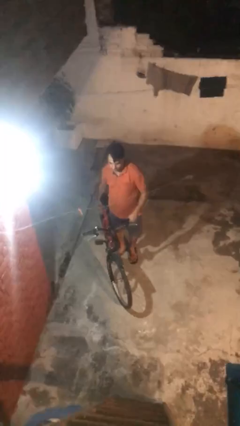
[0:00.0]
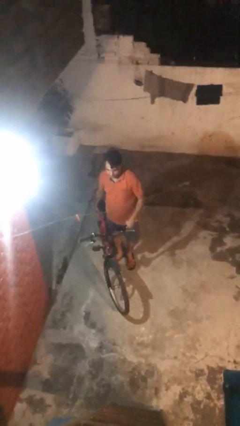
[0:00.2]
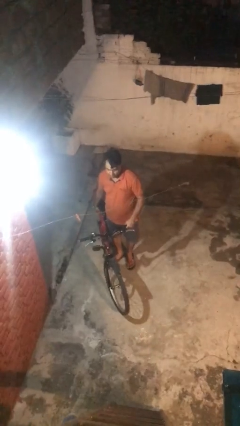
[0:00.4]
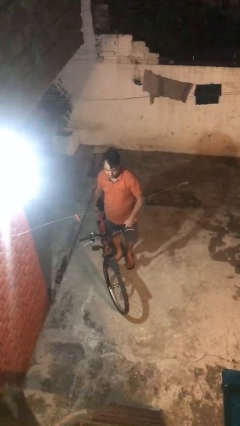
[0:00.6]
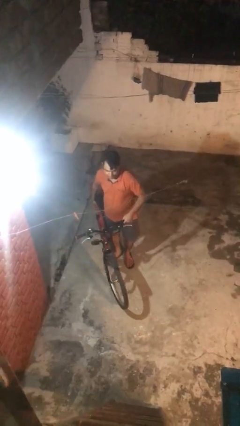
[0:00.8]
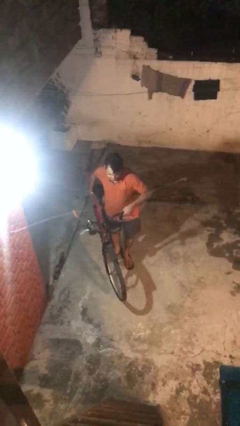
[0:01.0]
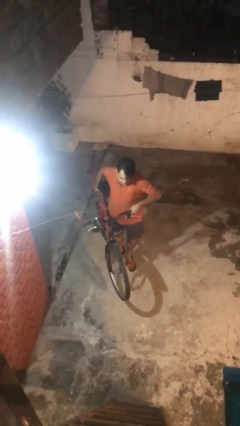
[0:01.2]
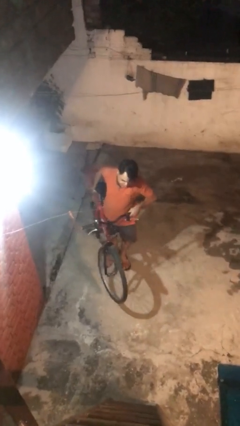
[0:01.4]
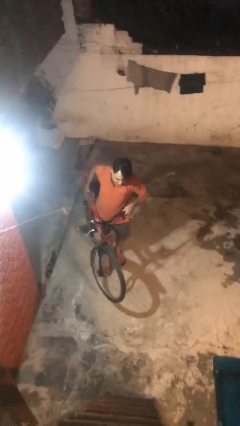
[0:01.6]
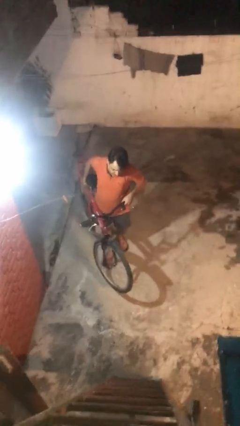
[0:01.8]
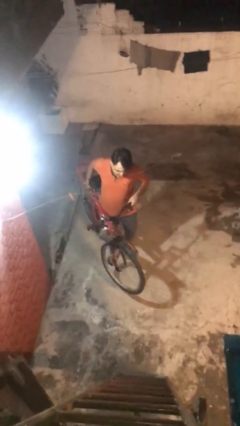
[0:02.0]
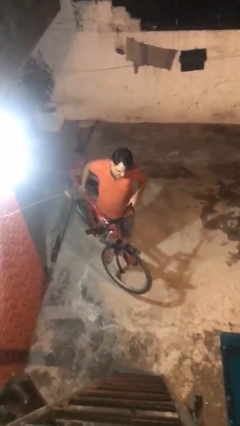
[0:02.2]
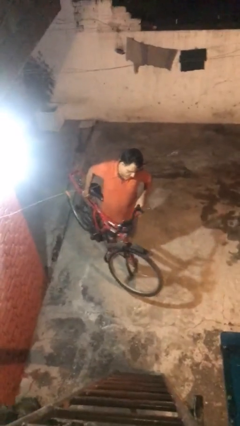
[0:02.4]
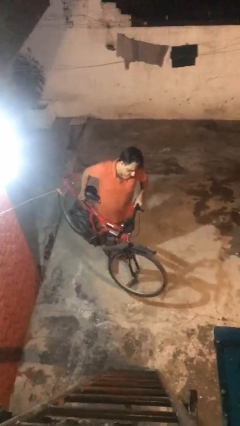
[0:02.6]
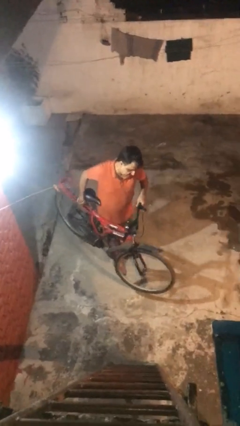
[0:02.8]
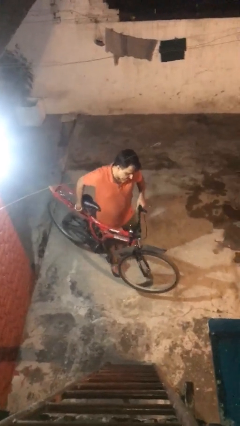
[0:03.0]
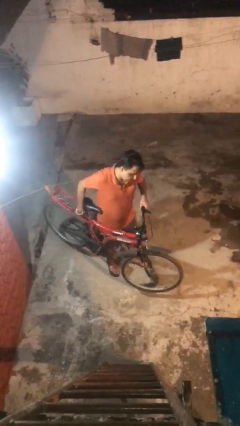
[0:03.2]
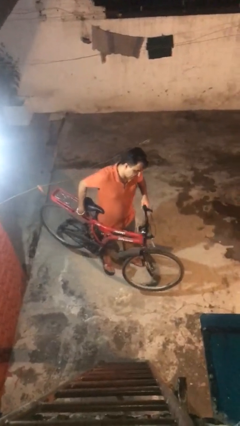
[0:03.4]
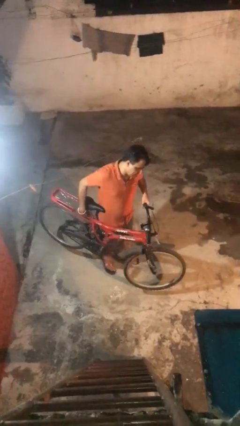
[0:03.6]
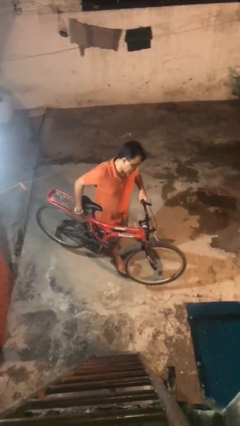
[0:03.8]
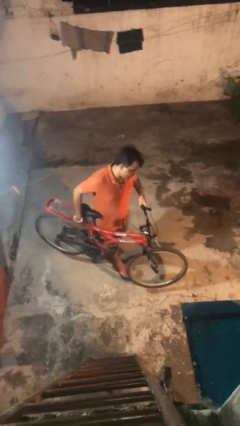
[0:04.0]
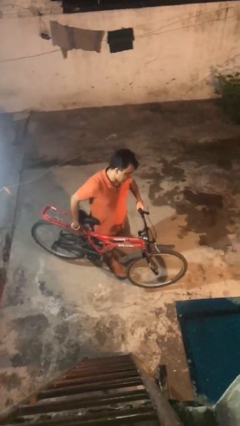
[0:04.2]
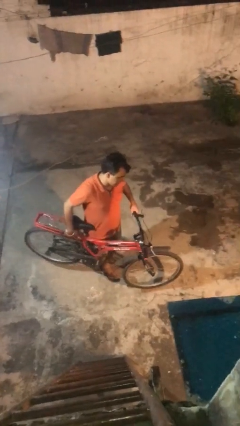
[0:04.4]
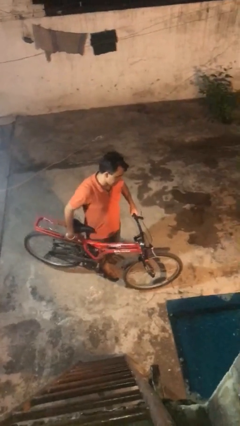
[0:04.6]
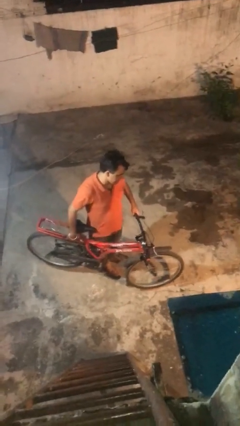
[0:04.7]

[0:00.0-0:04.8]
person carries bicycle

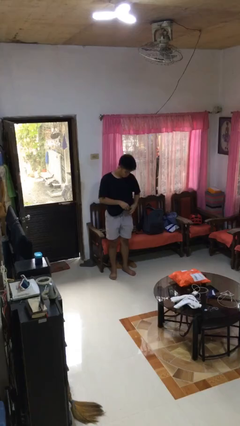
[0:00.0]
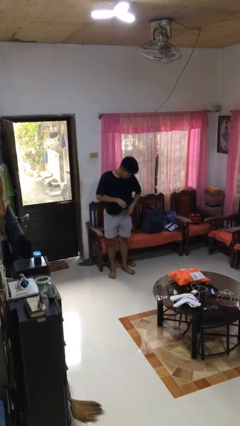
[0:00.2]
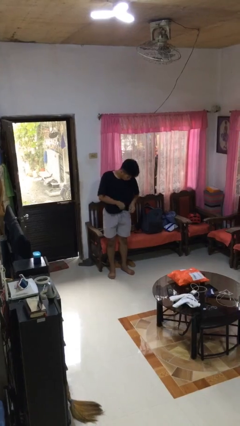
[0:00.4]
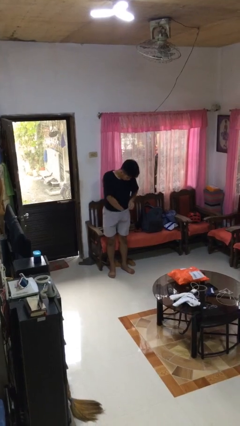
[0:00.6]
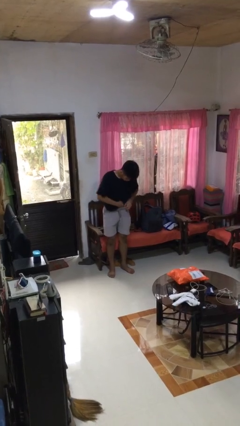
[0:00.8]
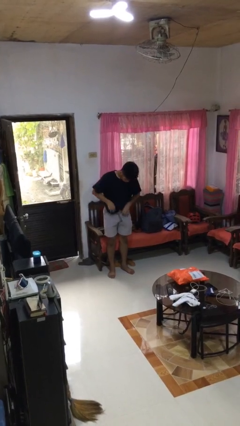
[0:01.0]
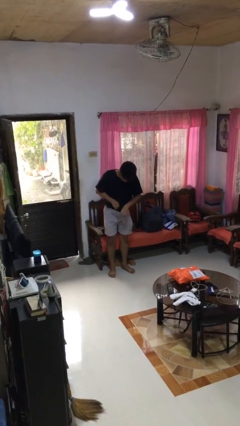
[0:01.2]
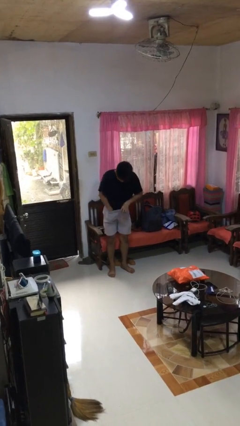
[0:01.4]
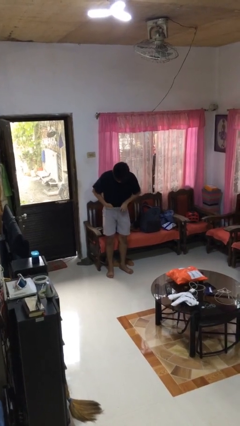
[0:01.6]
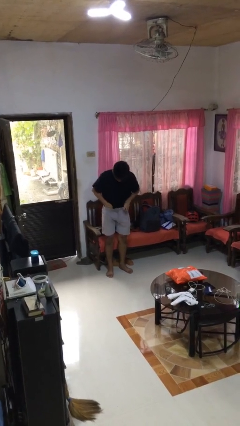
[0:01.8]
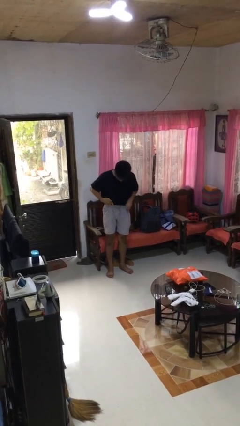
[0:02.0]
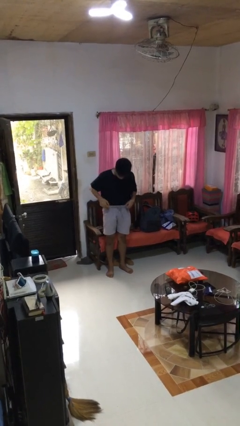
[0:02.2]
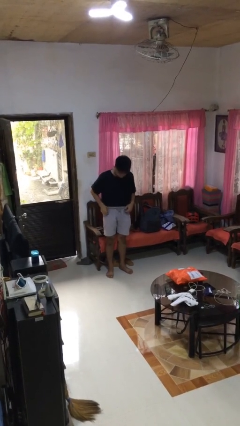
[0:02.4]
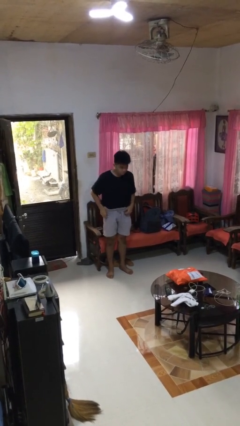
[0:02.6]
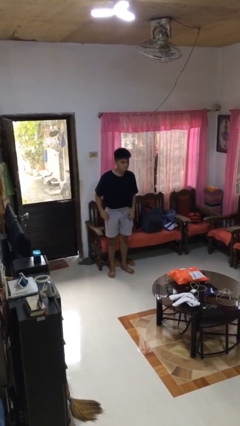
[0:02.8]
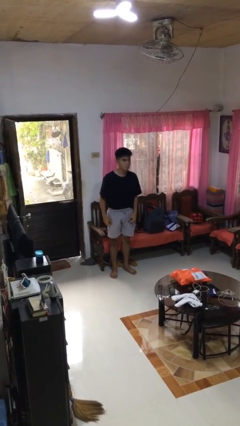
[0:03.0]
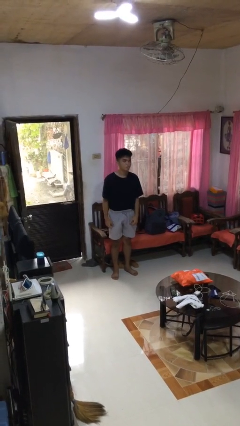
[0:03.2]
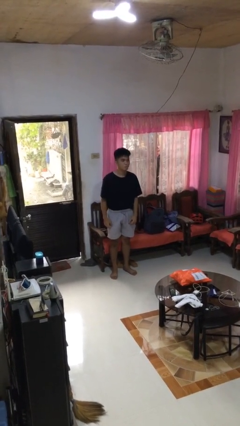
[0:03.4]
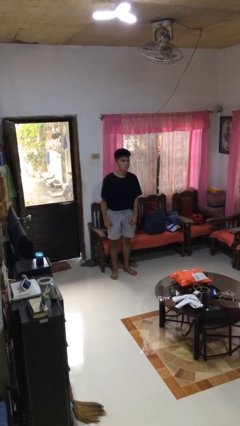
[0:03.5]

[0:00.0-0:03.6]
person tucks in shirt

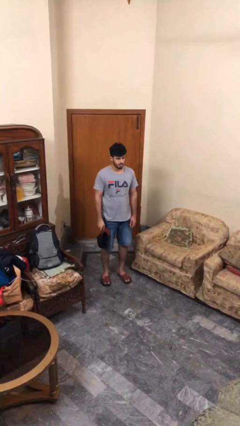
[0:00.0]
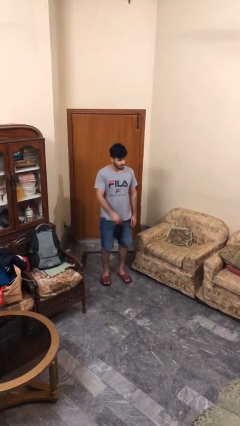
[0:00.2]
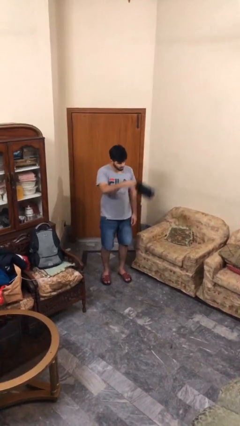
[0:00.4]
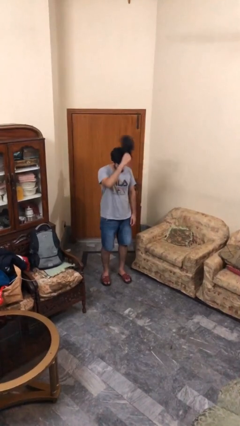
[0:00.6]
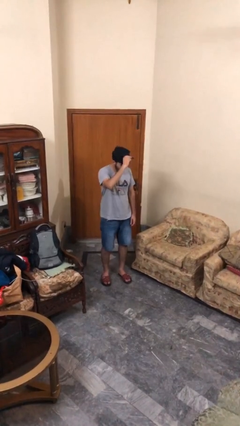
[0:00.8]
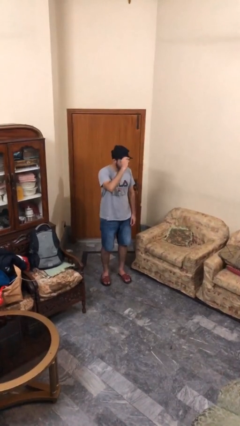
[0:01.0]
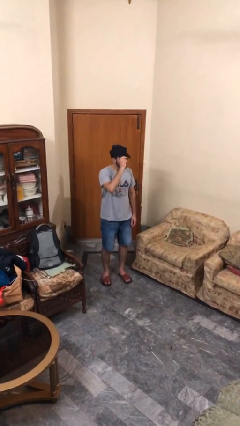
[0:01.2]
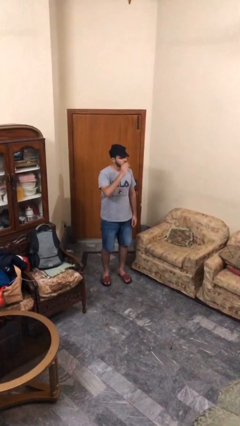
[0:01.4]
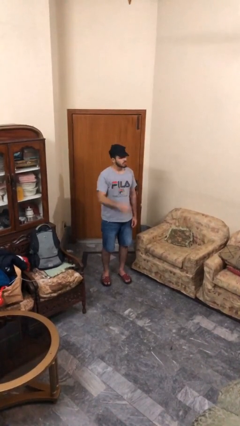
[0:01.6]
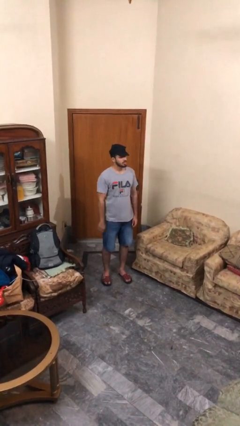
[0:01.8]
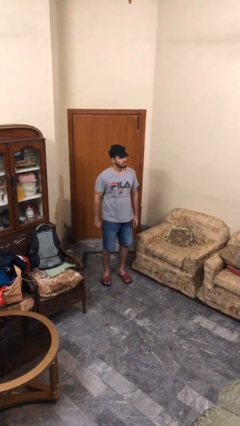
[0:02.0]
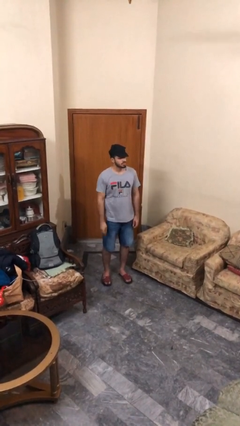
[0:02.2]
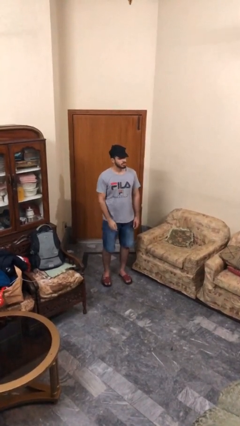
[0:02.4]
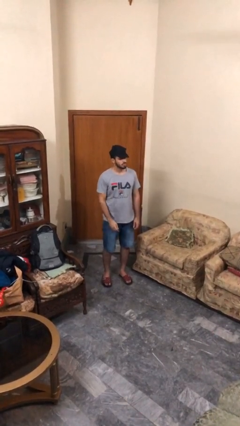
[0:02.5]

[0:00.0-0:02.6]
person puts on hat

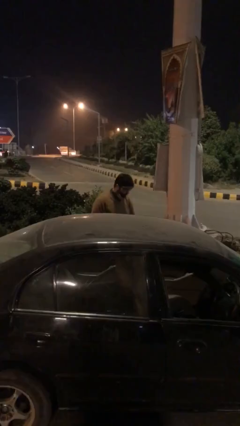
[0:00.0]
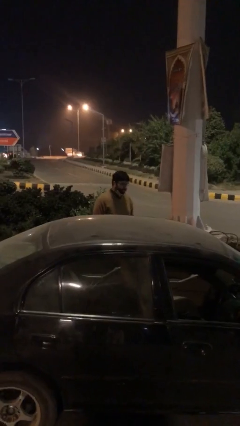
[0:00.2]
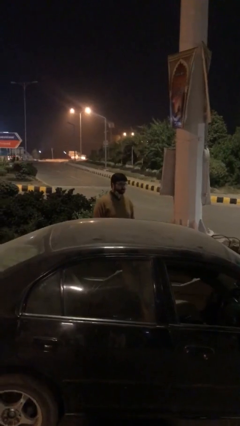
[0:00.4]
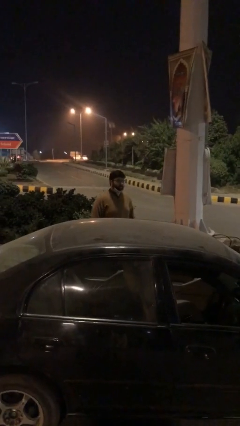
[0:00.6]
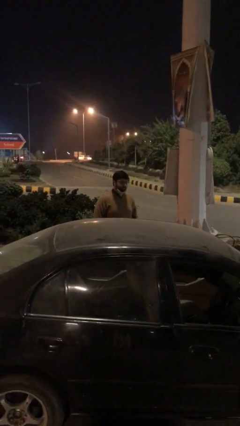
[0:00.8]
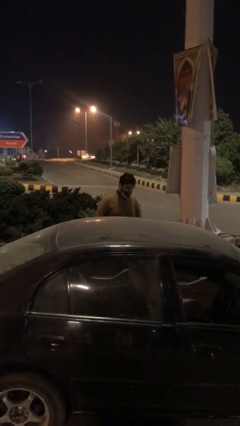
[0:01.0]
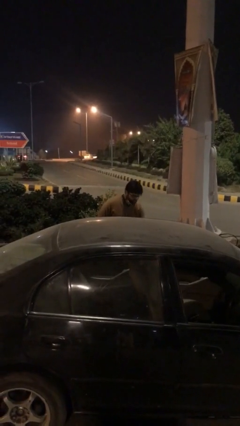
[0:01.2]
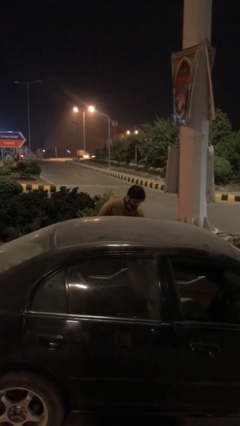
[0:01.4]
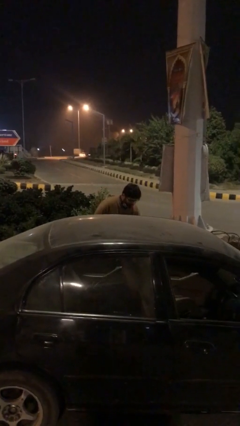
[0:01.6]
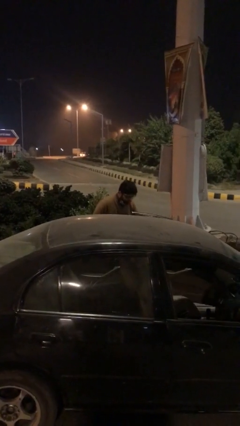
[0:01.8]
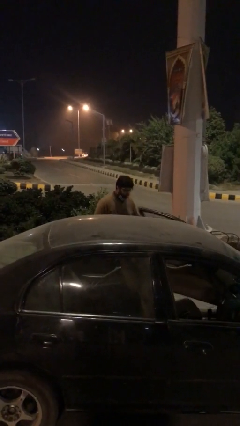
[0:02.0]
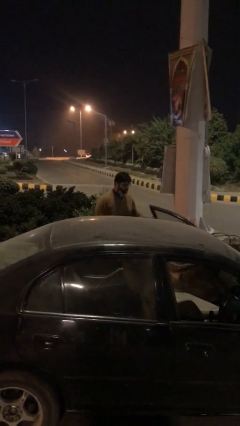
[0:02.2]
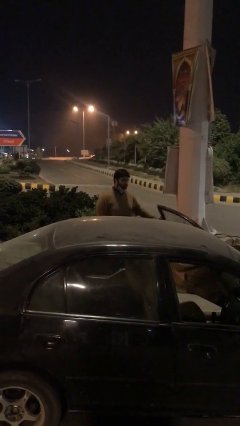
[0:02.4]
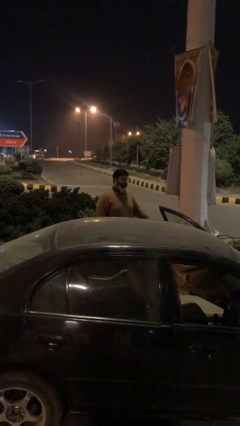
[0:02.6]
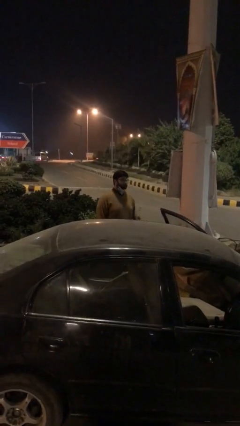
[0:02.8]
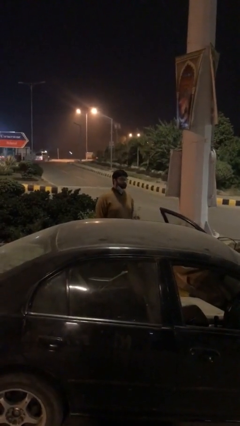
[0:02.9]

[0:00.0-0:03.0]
person opens car door

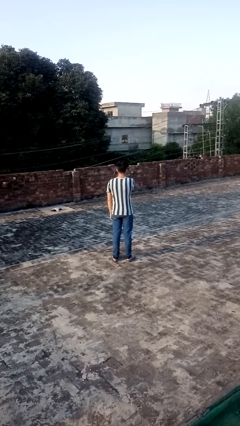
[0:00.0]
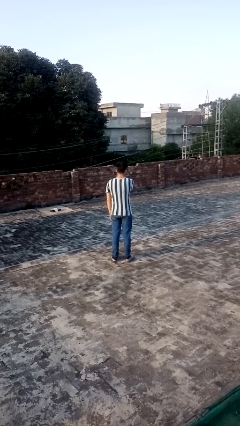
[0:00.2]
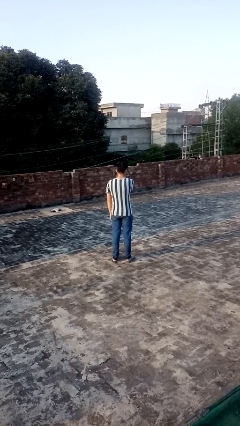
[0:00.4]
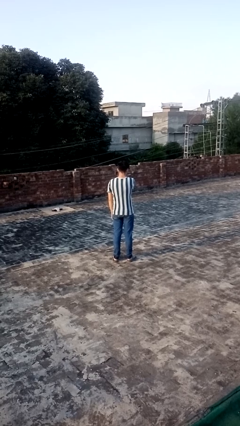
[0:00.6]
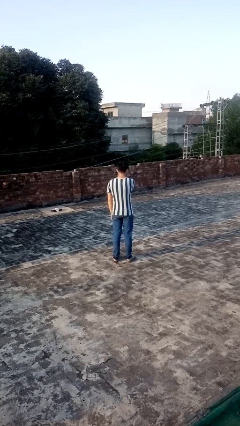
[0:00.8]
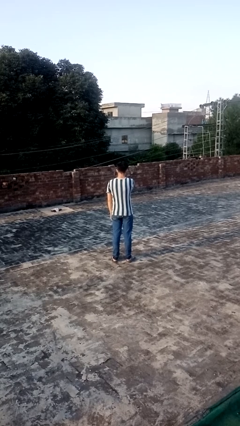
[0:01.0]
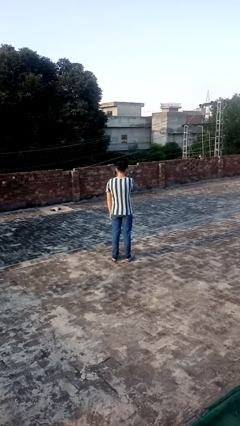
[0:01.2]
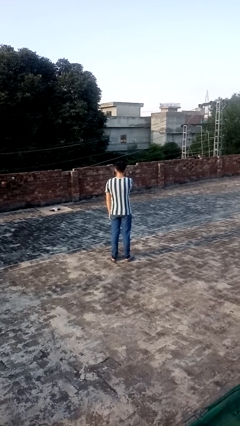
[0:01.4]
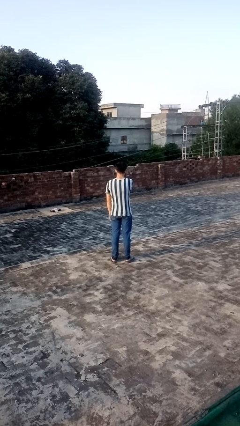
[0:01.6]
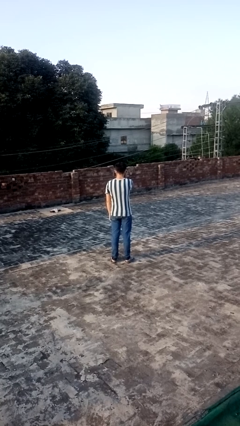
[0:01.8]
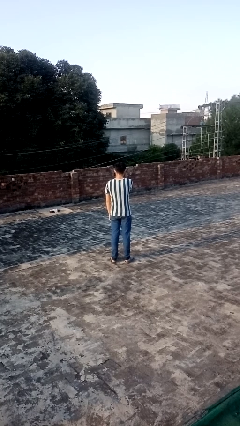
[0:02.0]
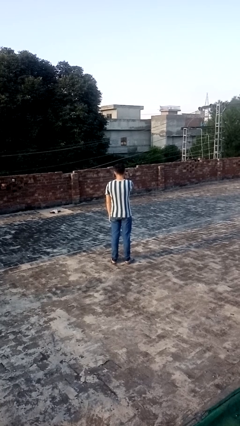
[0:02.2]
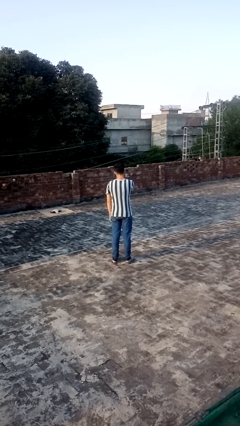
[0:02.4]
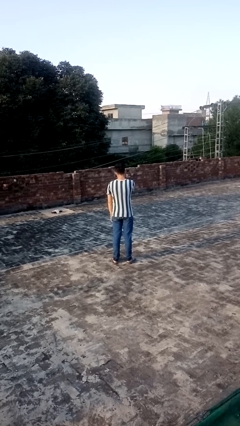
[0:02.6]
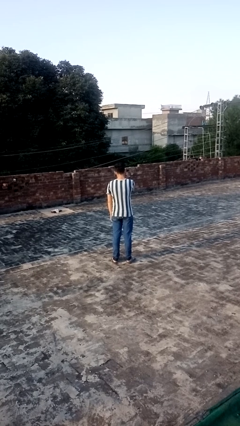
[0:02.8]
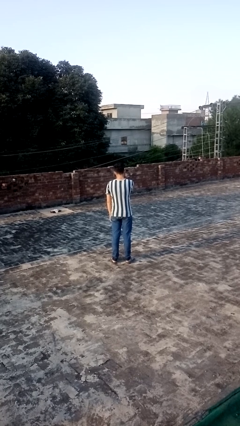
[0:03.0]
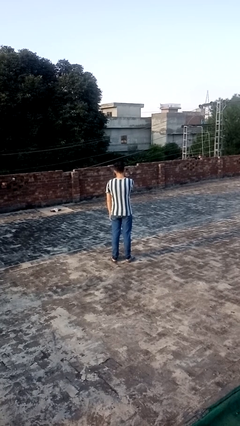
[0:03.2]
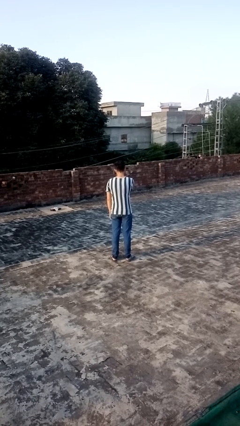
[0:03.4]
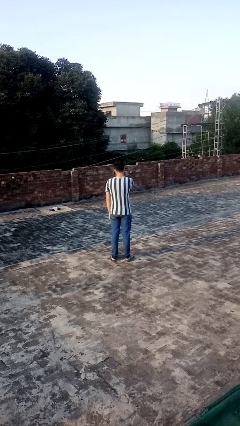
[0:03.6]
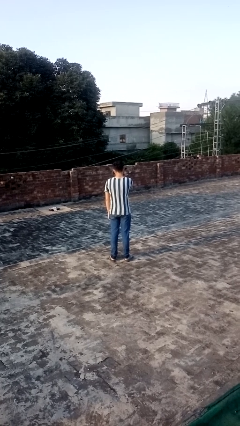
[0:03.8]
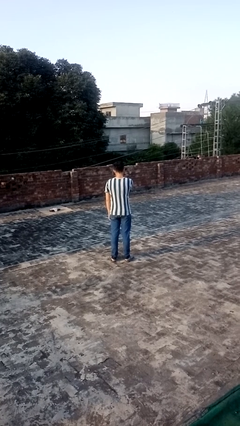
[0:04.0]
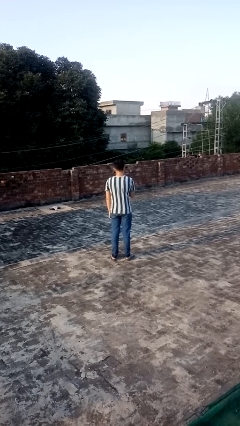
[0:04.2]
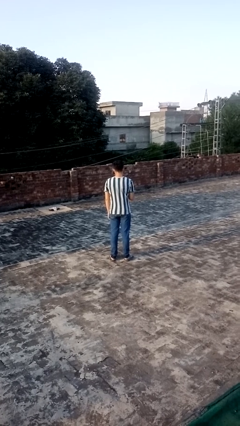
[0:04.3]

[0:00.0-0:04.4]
person scratches face
